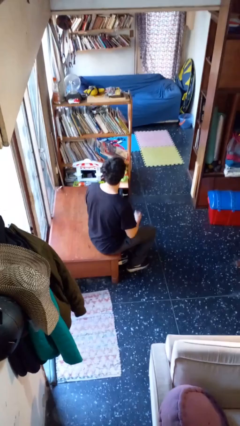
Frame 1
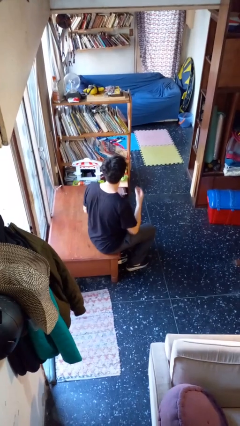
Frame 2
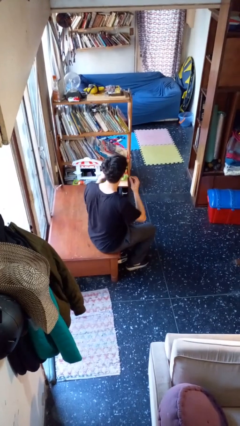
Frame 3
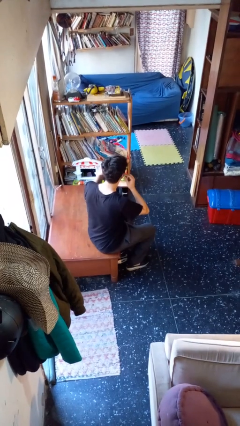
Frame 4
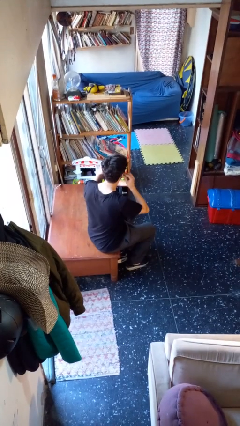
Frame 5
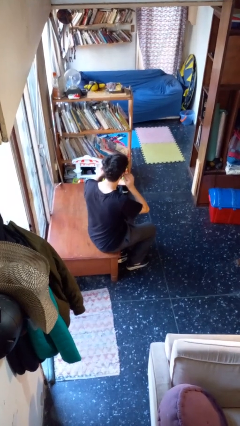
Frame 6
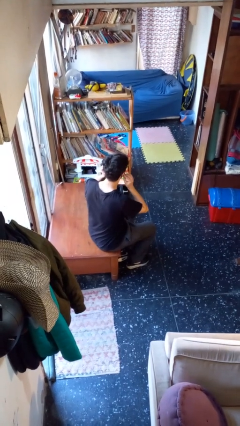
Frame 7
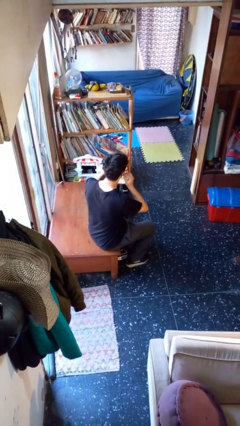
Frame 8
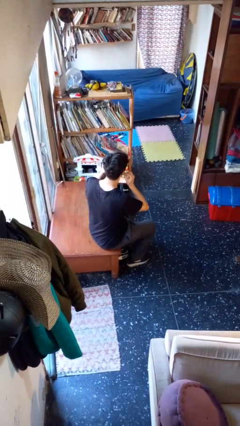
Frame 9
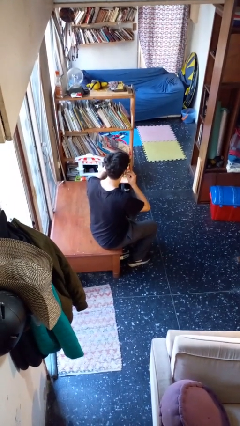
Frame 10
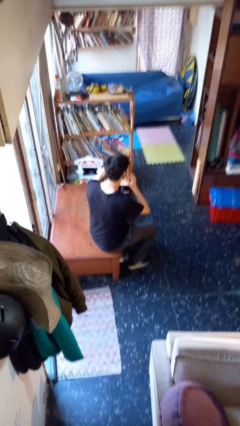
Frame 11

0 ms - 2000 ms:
person puts on headphones

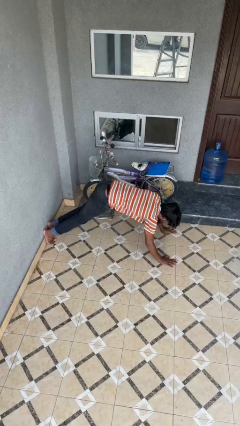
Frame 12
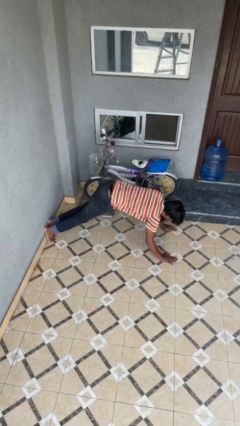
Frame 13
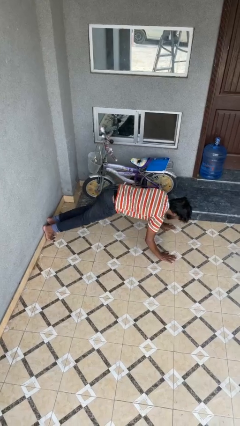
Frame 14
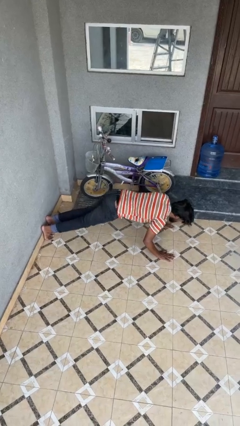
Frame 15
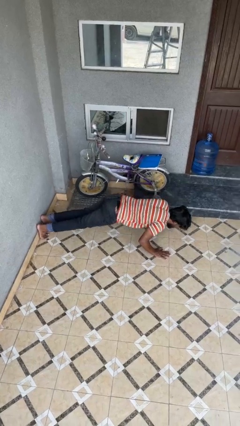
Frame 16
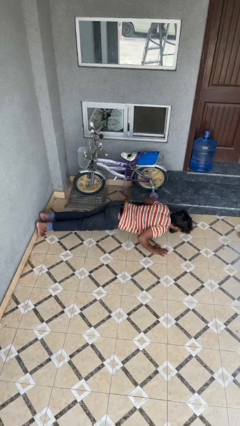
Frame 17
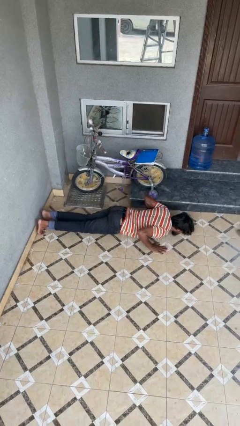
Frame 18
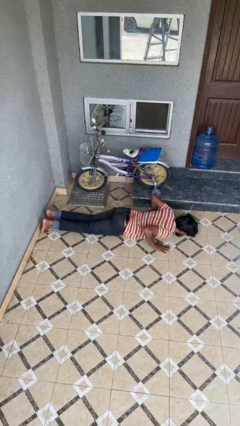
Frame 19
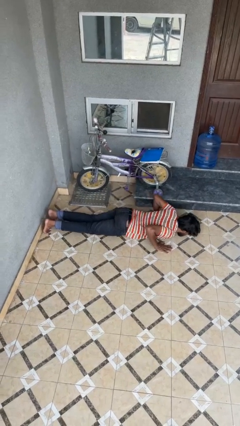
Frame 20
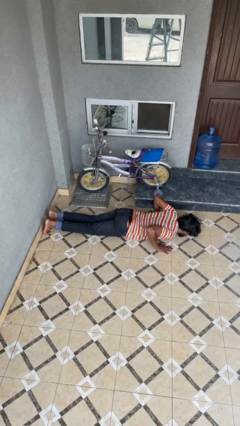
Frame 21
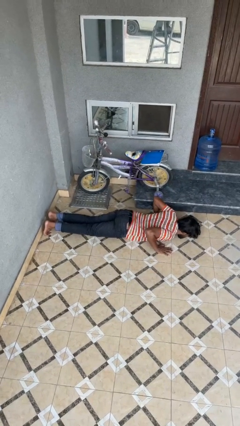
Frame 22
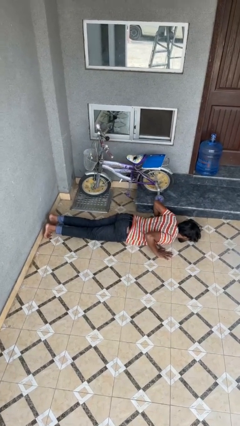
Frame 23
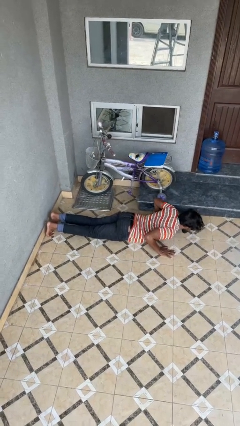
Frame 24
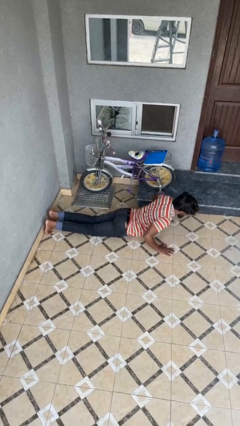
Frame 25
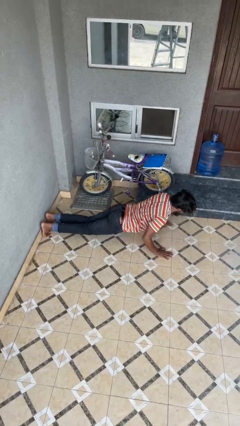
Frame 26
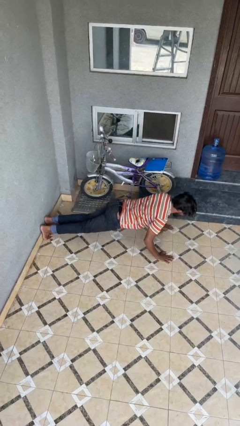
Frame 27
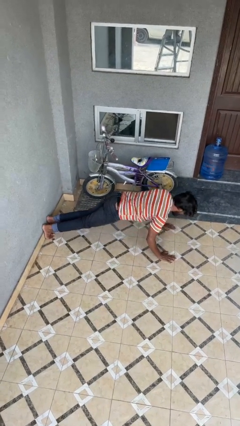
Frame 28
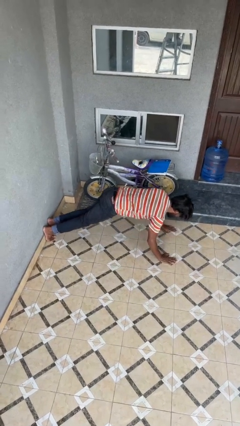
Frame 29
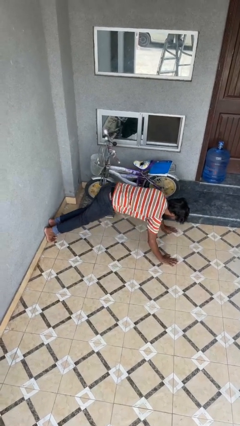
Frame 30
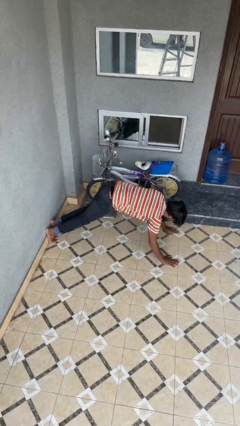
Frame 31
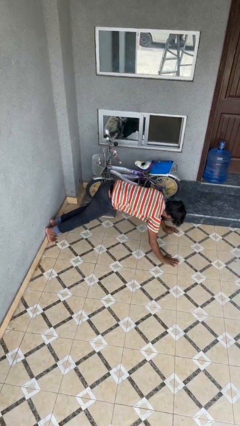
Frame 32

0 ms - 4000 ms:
person exercises with pushup

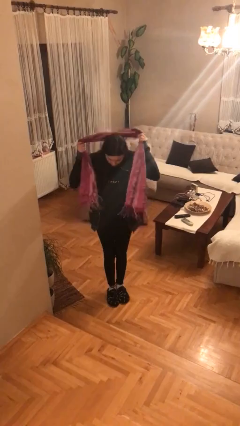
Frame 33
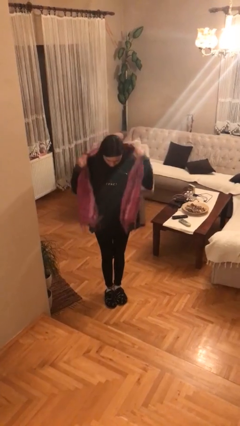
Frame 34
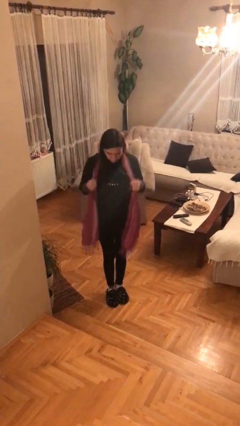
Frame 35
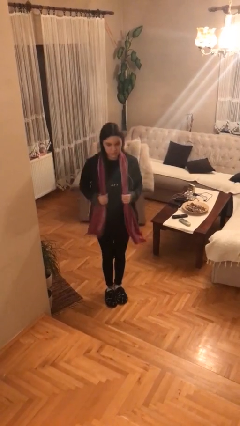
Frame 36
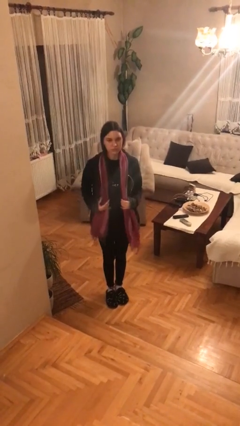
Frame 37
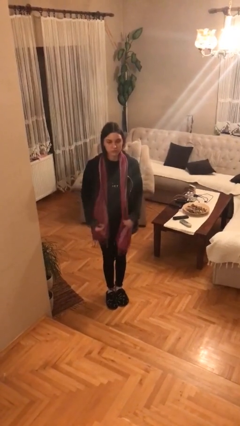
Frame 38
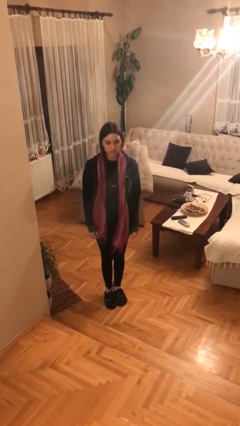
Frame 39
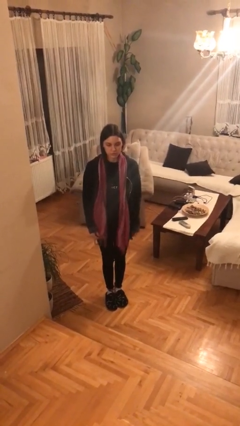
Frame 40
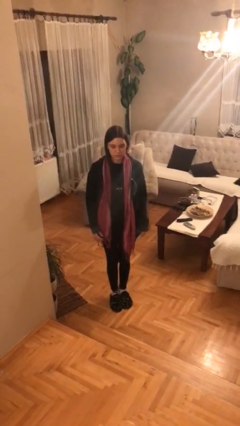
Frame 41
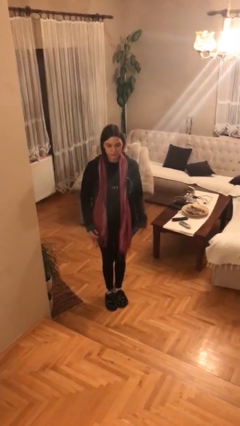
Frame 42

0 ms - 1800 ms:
person puts on scarf

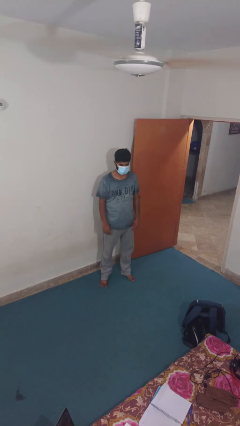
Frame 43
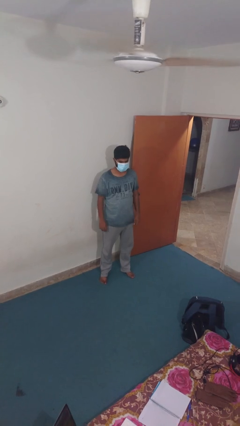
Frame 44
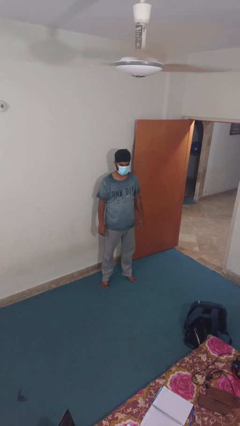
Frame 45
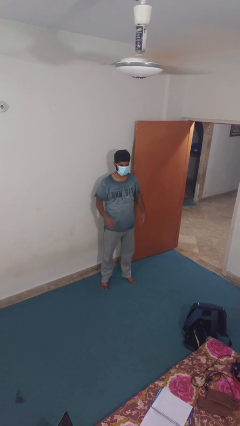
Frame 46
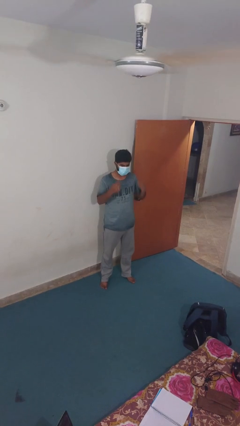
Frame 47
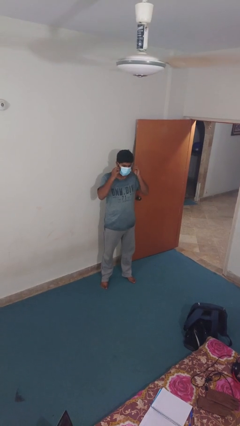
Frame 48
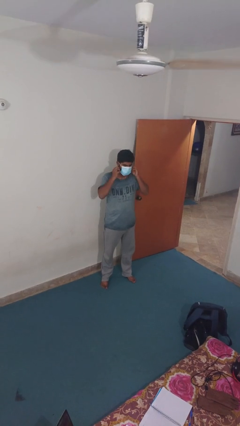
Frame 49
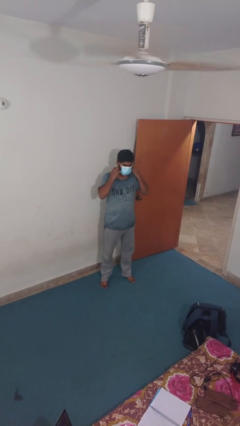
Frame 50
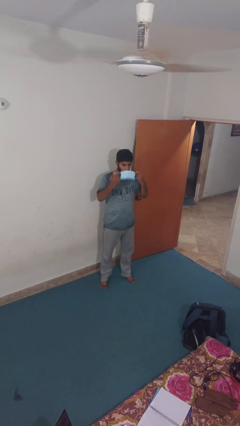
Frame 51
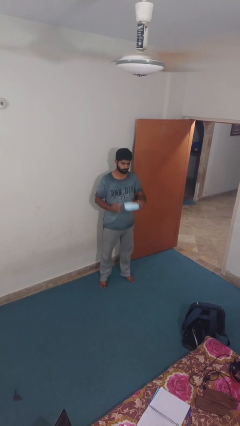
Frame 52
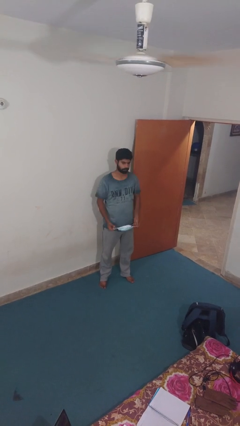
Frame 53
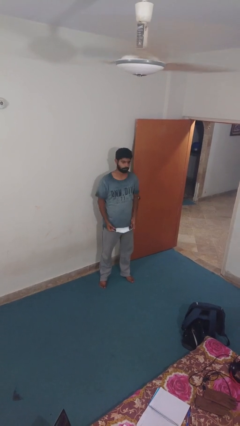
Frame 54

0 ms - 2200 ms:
person takes off facemask

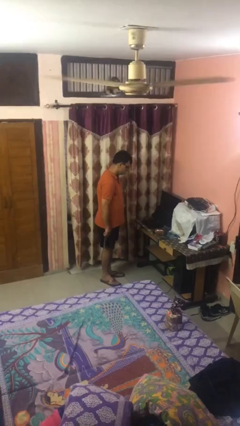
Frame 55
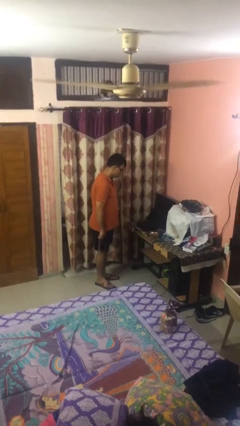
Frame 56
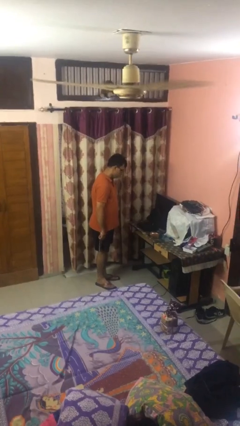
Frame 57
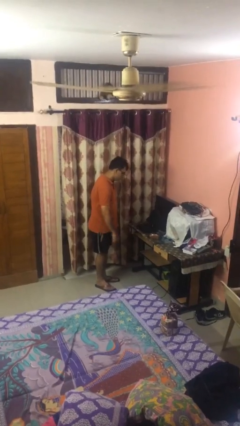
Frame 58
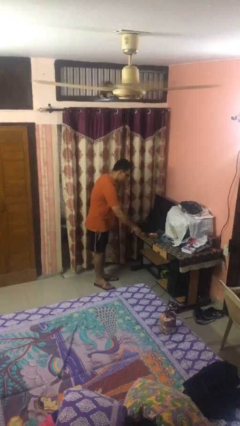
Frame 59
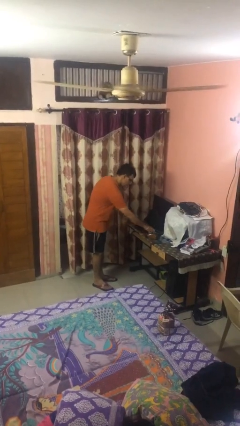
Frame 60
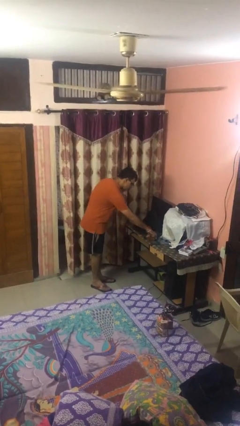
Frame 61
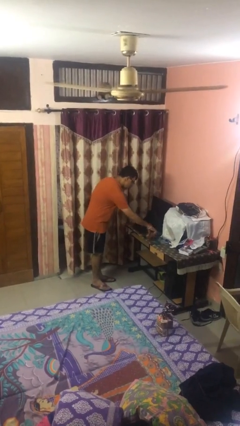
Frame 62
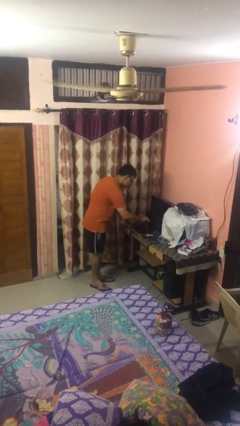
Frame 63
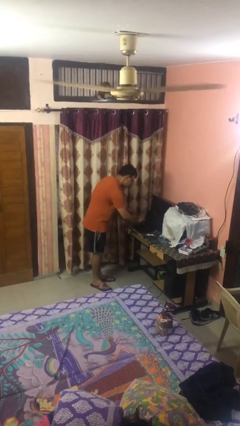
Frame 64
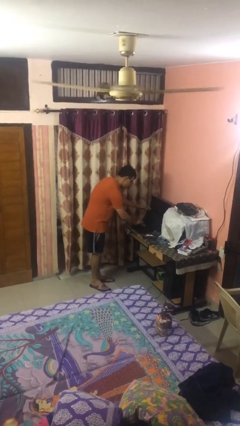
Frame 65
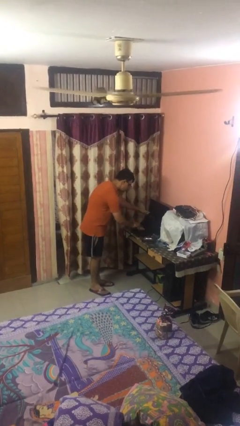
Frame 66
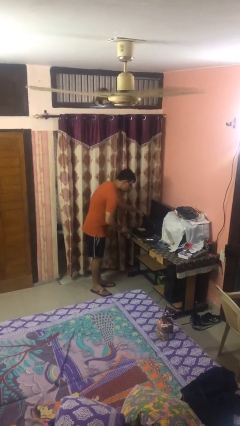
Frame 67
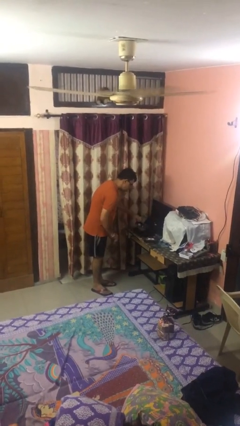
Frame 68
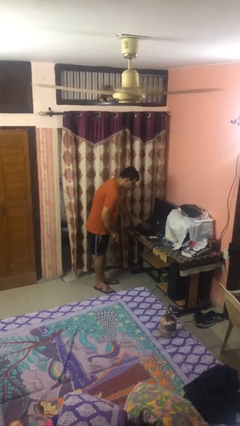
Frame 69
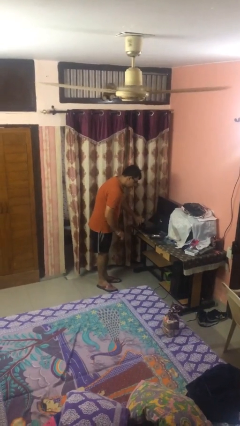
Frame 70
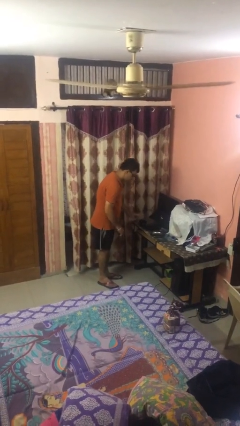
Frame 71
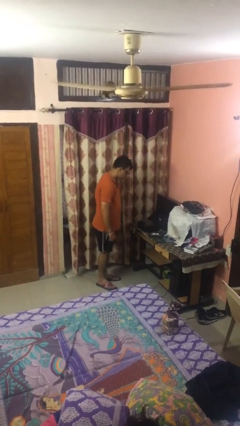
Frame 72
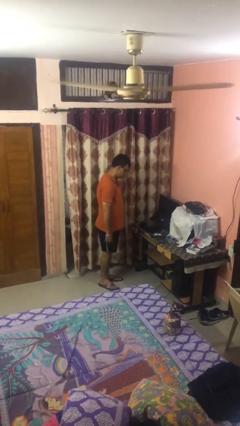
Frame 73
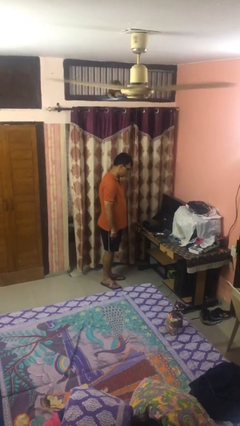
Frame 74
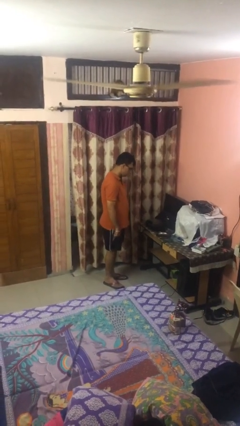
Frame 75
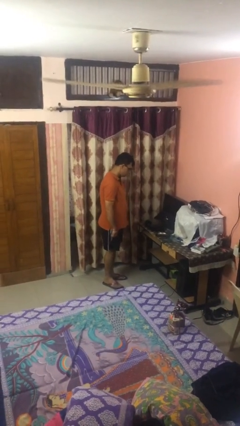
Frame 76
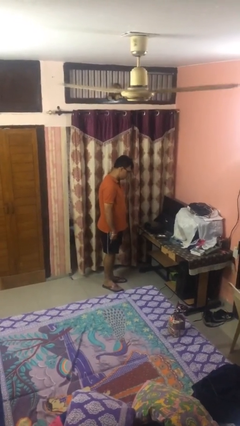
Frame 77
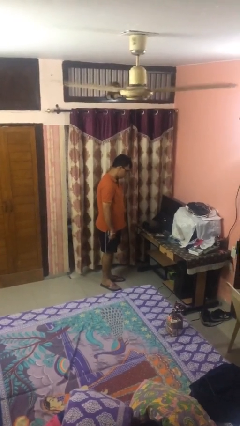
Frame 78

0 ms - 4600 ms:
person puts object into toaster

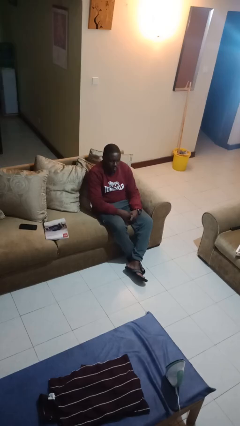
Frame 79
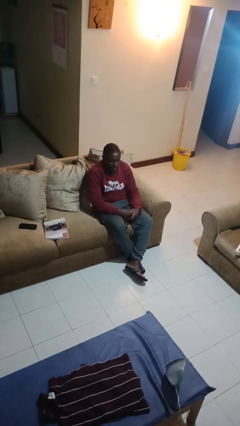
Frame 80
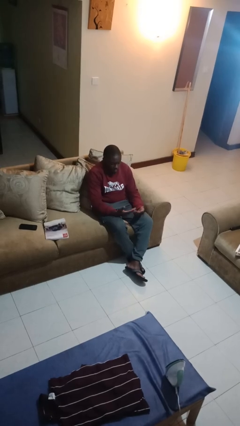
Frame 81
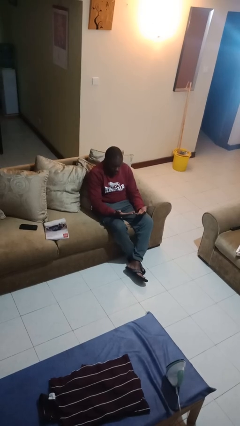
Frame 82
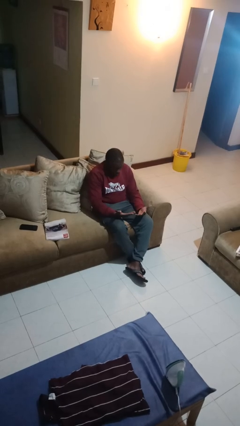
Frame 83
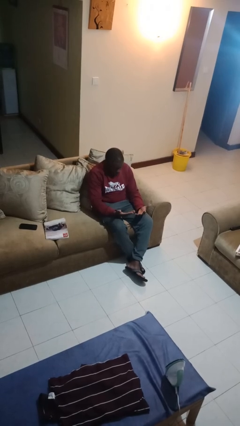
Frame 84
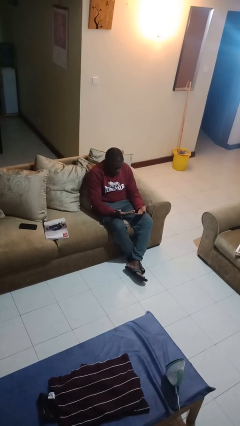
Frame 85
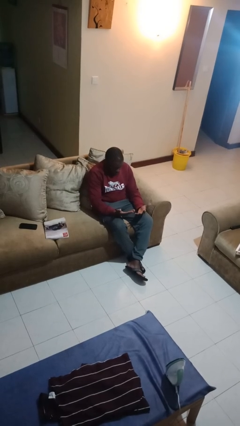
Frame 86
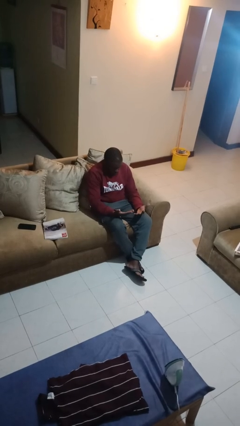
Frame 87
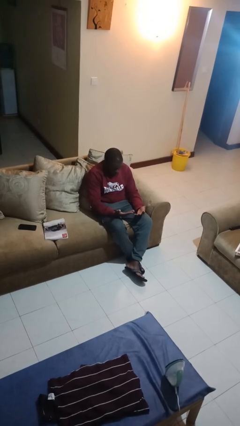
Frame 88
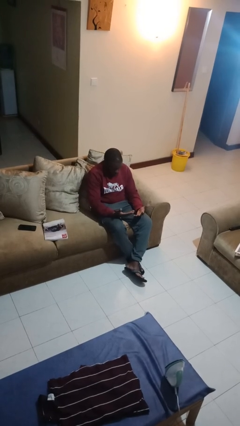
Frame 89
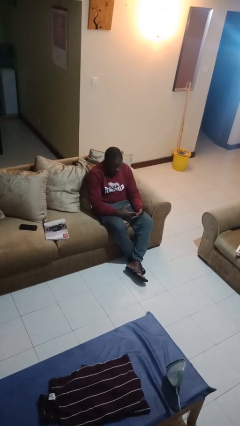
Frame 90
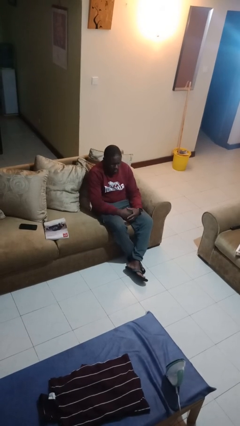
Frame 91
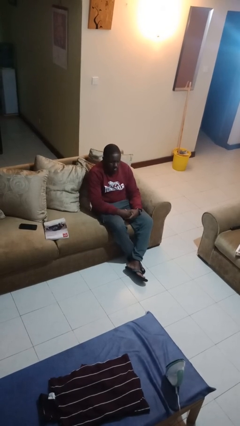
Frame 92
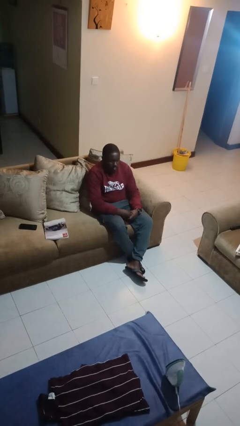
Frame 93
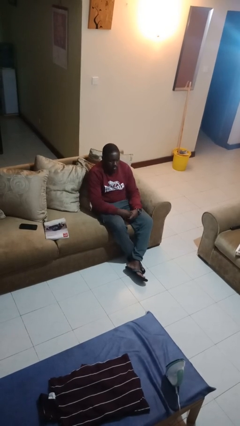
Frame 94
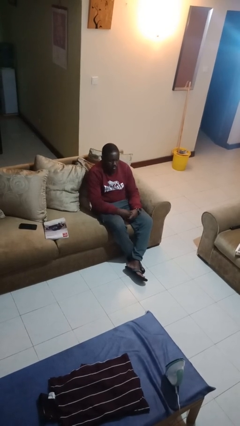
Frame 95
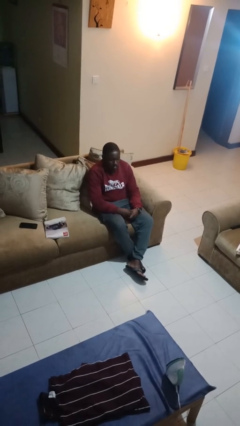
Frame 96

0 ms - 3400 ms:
person looks at hands in lap
